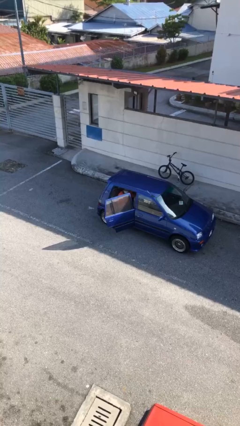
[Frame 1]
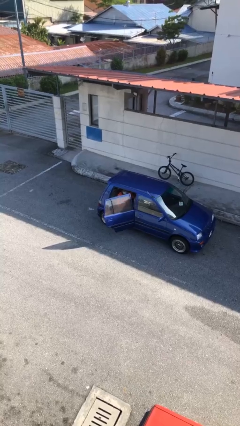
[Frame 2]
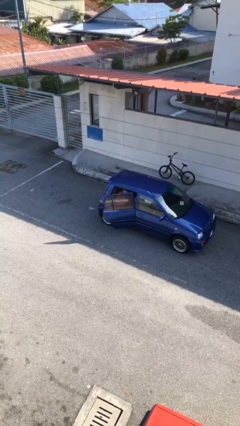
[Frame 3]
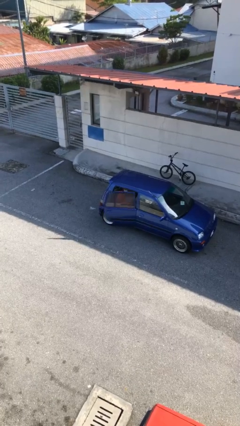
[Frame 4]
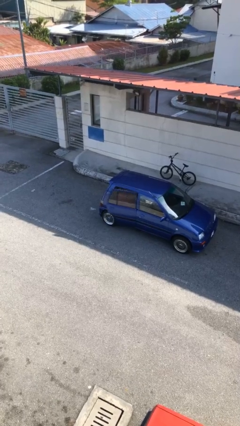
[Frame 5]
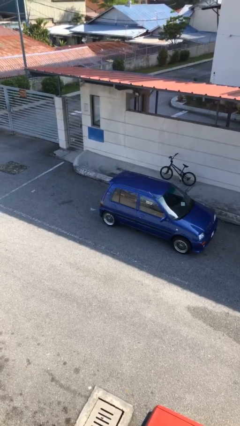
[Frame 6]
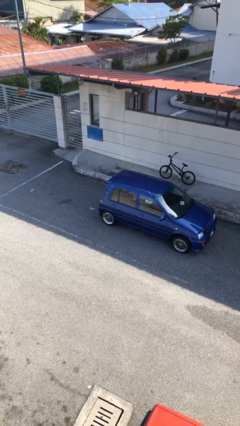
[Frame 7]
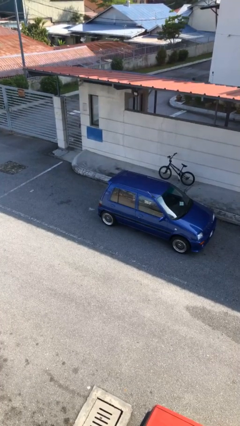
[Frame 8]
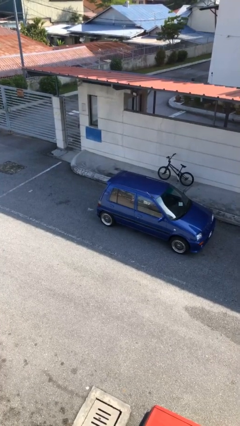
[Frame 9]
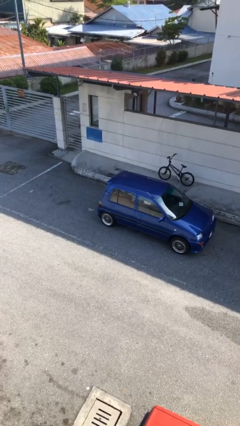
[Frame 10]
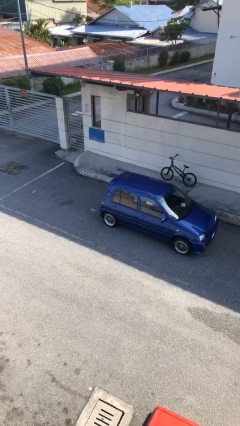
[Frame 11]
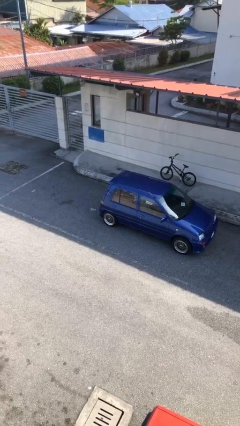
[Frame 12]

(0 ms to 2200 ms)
person closes car door

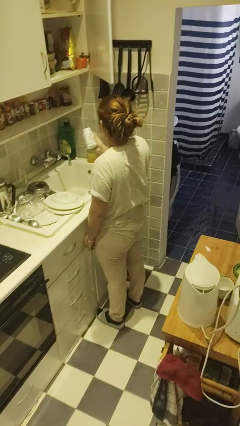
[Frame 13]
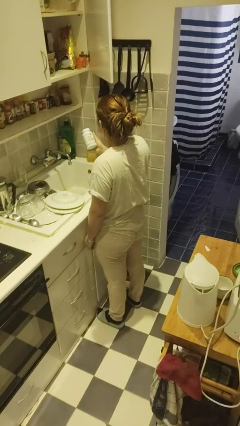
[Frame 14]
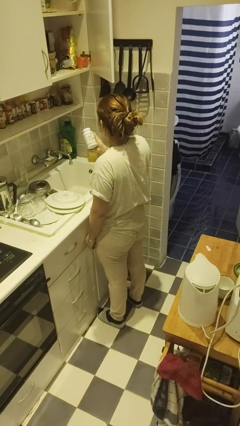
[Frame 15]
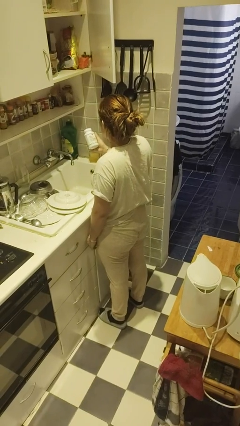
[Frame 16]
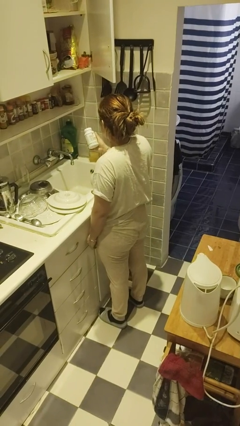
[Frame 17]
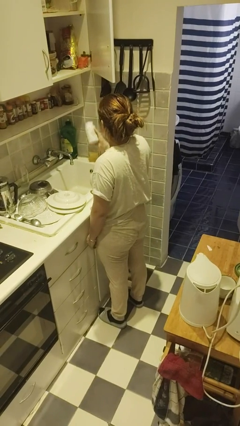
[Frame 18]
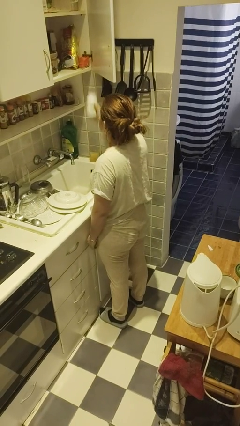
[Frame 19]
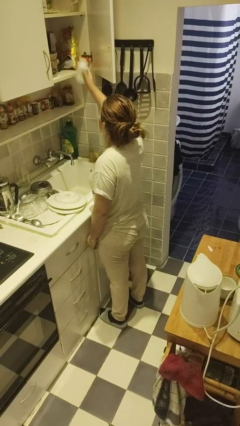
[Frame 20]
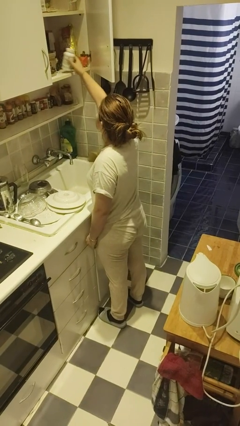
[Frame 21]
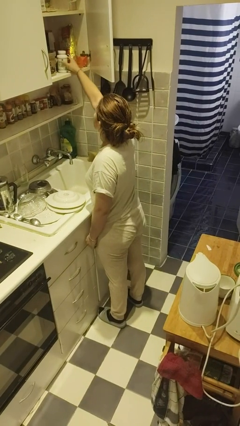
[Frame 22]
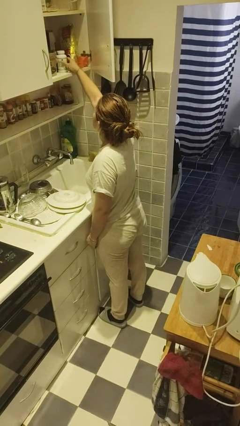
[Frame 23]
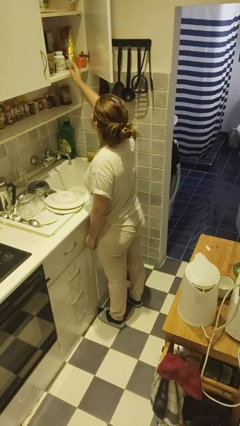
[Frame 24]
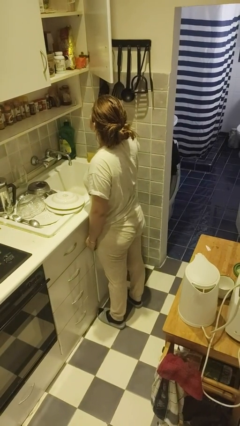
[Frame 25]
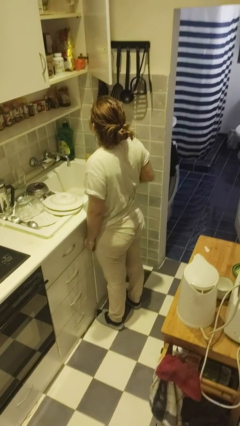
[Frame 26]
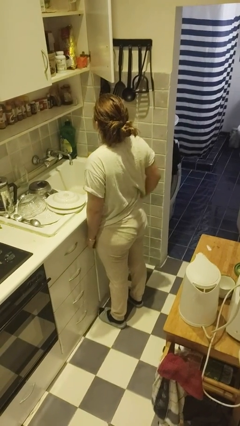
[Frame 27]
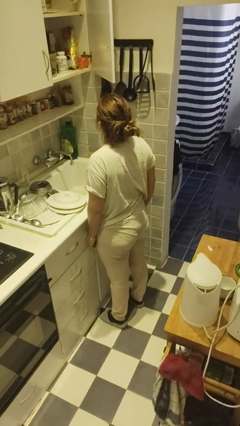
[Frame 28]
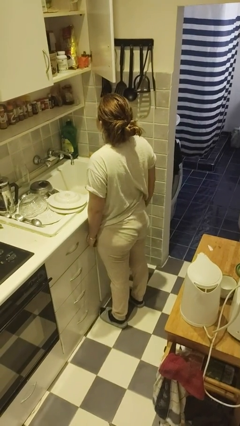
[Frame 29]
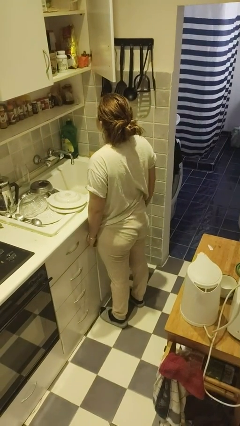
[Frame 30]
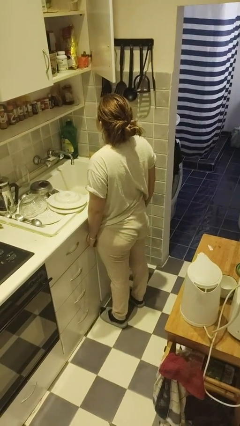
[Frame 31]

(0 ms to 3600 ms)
person puts down object into cabinet

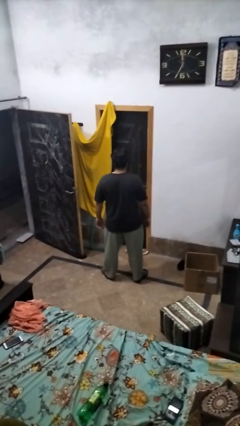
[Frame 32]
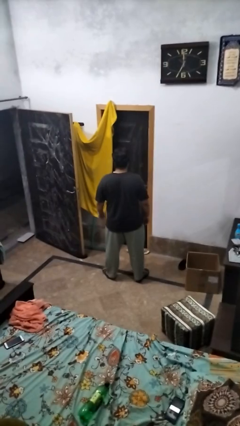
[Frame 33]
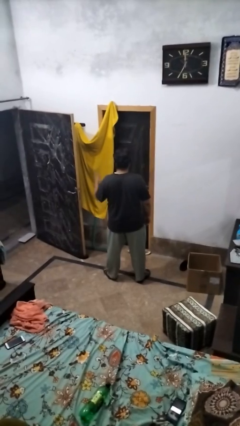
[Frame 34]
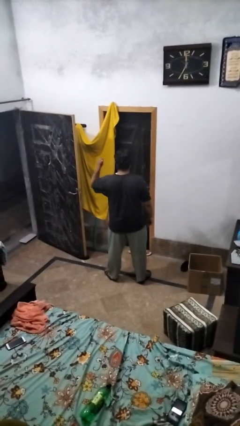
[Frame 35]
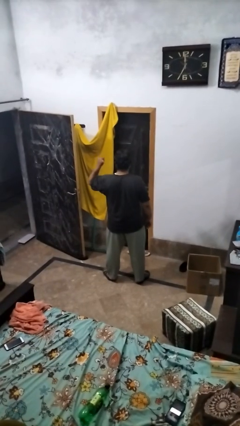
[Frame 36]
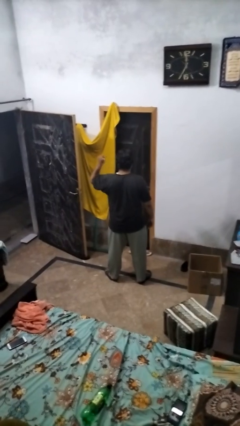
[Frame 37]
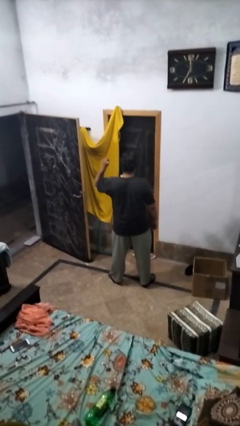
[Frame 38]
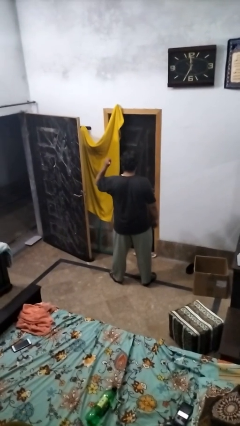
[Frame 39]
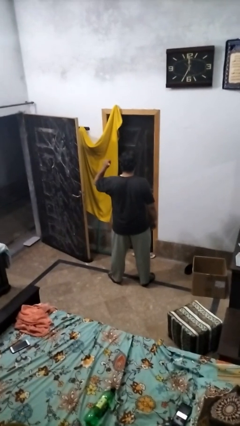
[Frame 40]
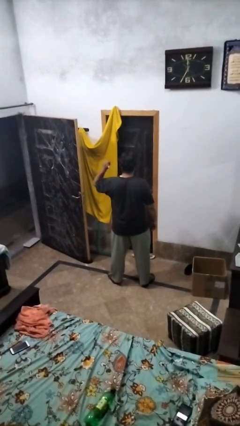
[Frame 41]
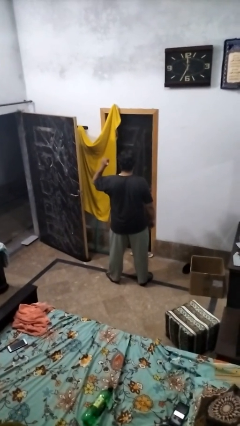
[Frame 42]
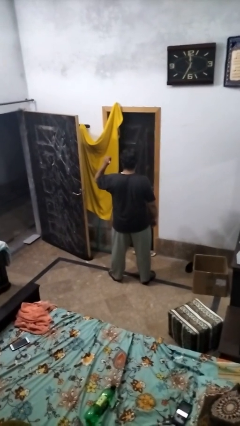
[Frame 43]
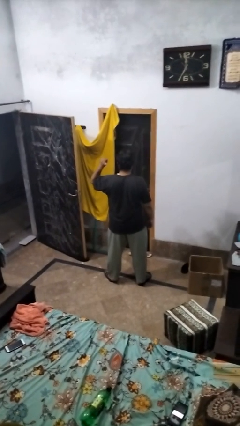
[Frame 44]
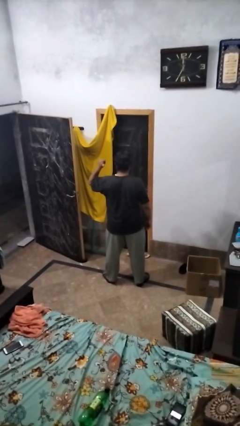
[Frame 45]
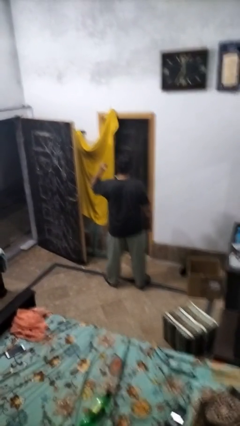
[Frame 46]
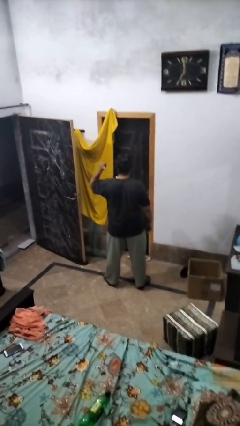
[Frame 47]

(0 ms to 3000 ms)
person gestures behind me

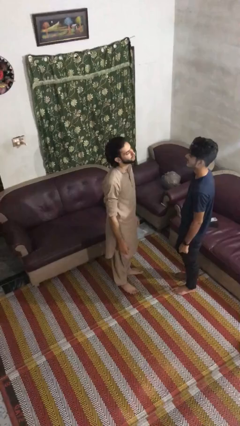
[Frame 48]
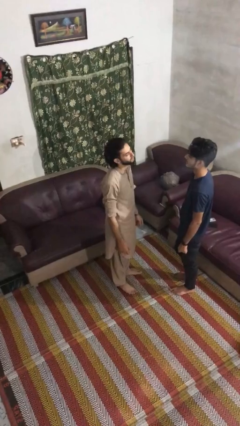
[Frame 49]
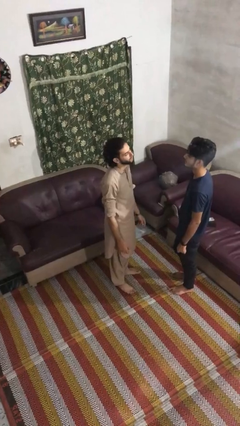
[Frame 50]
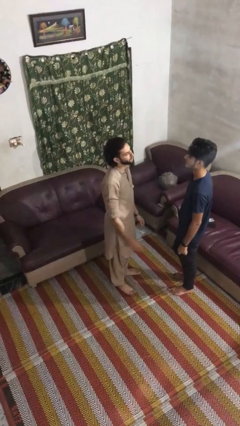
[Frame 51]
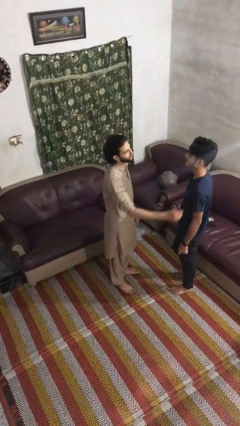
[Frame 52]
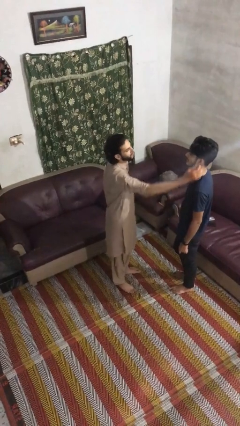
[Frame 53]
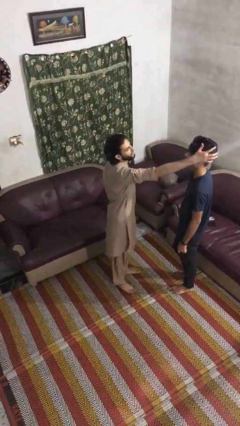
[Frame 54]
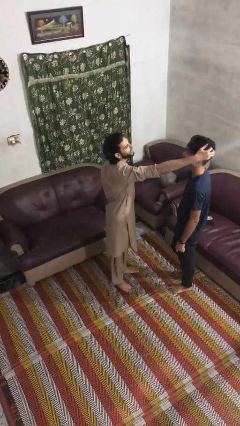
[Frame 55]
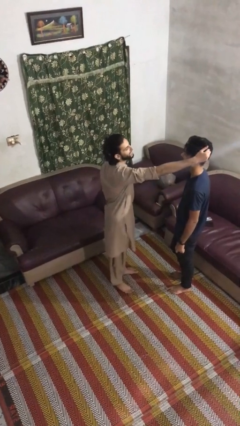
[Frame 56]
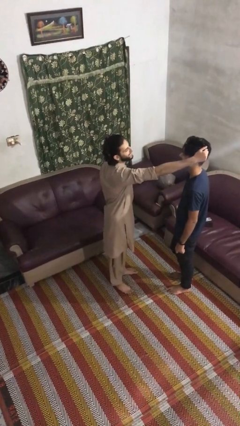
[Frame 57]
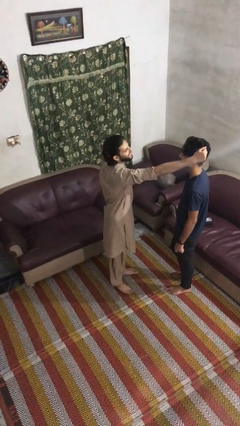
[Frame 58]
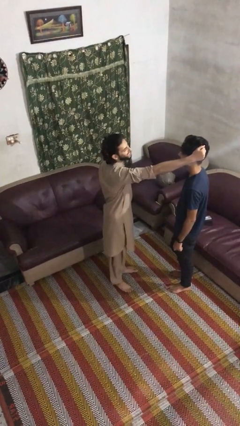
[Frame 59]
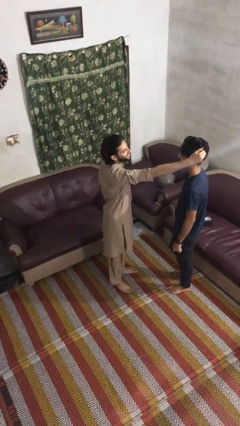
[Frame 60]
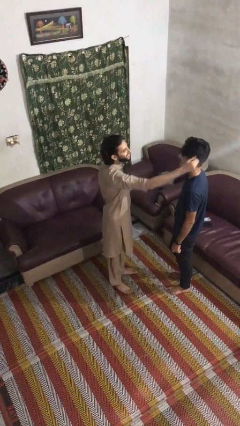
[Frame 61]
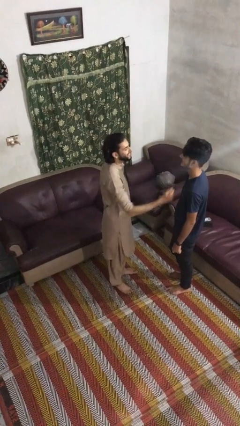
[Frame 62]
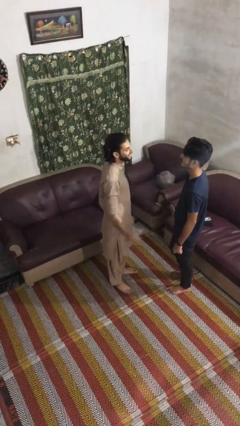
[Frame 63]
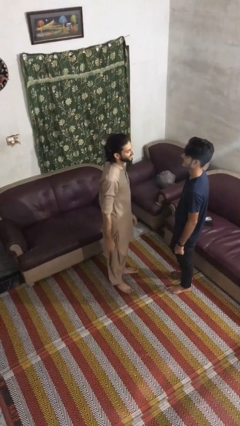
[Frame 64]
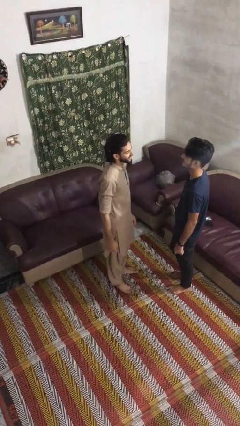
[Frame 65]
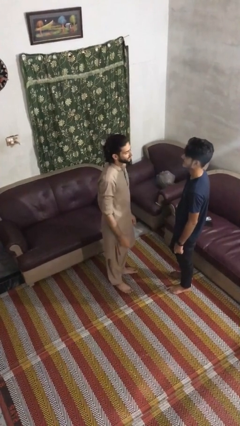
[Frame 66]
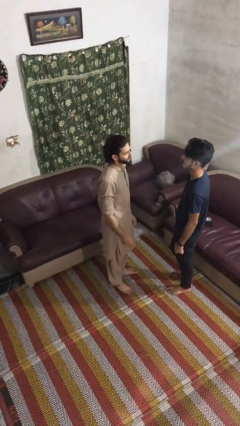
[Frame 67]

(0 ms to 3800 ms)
person grabs person by hair

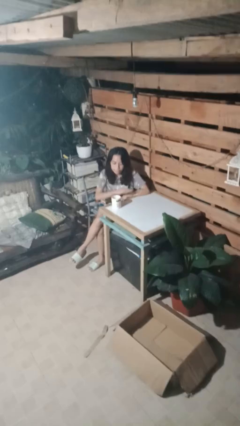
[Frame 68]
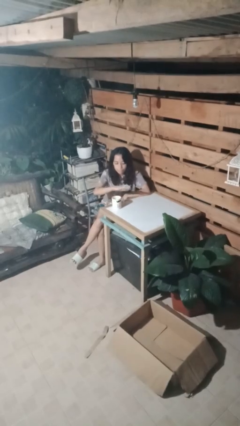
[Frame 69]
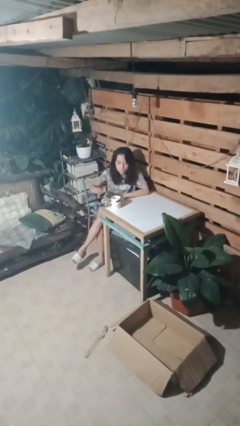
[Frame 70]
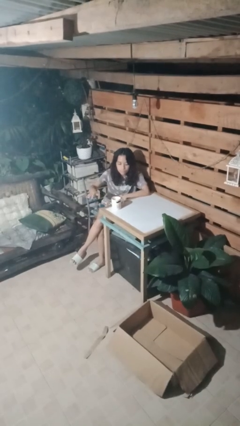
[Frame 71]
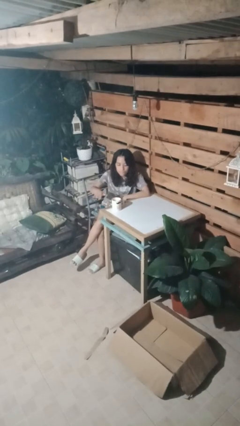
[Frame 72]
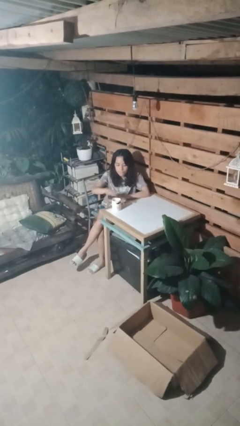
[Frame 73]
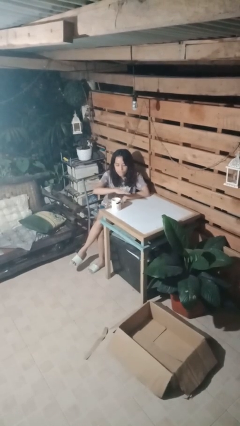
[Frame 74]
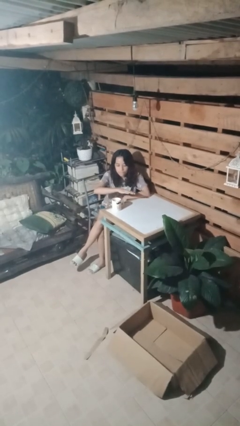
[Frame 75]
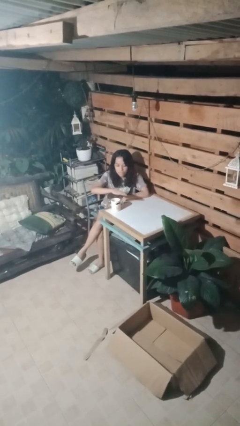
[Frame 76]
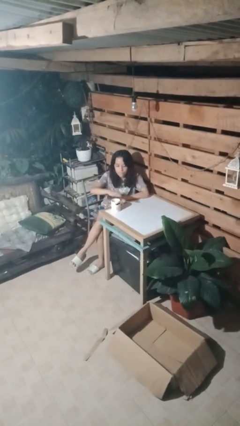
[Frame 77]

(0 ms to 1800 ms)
person waves hand over object

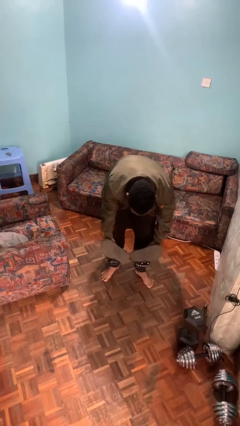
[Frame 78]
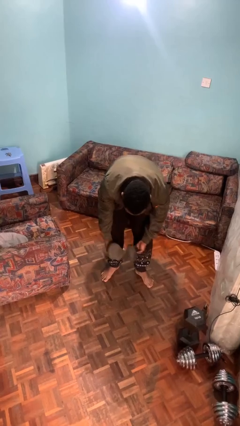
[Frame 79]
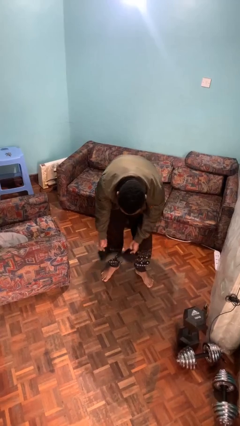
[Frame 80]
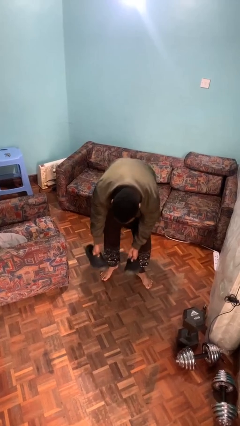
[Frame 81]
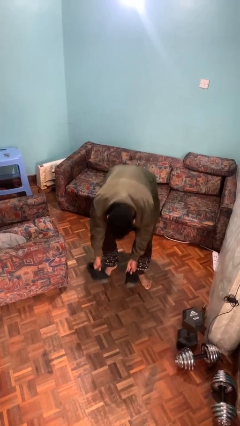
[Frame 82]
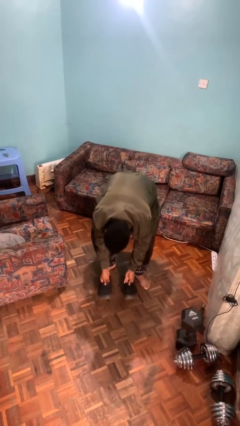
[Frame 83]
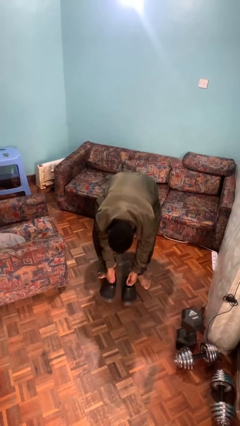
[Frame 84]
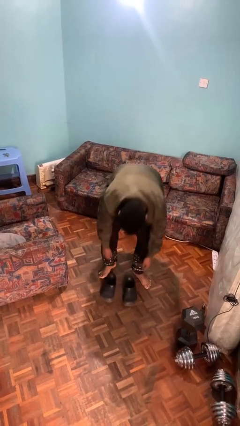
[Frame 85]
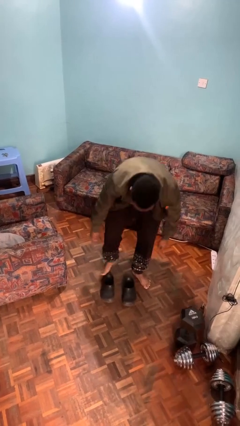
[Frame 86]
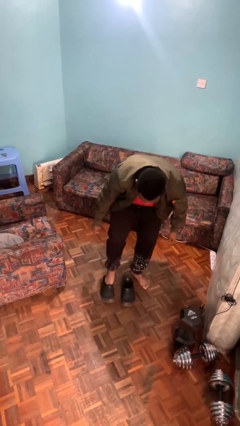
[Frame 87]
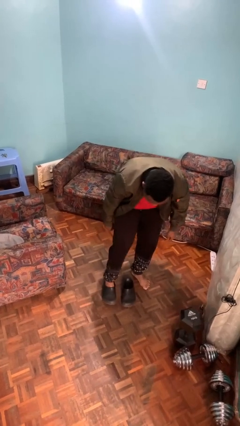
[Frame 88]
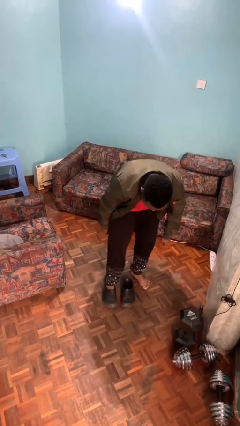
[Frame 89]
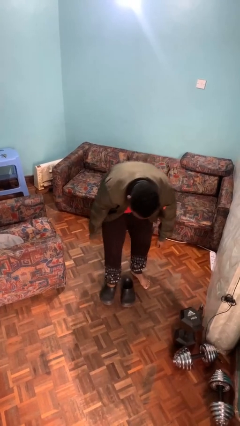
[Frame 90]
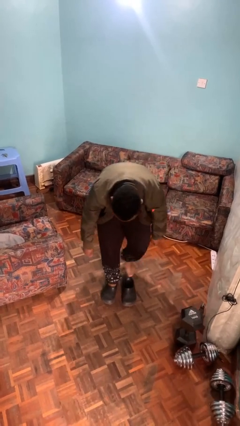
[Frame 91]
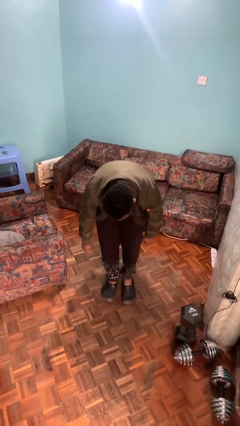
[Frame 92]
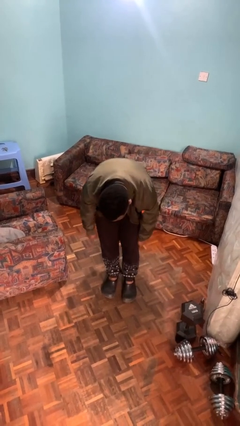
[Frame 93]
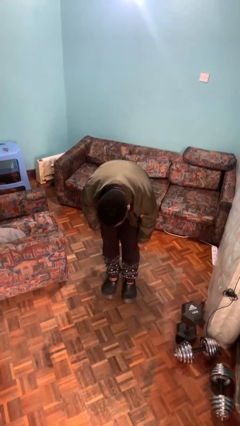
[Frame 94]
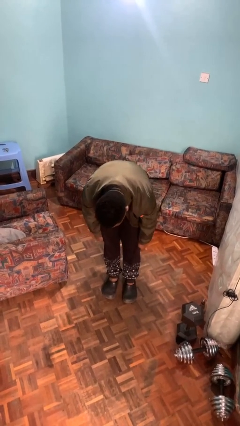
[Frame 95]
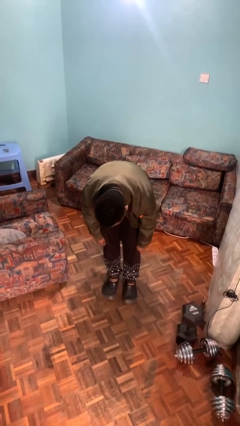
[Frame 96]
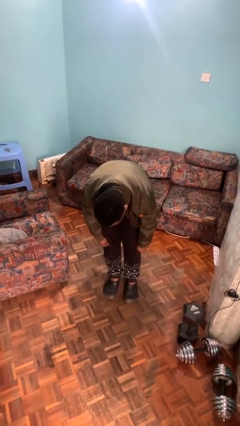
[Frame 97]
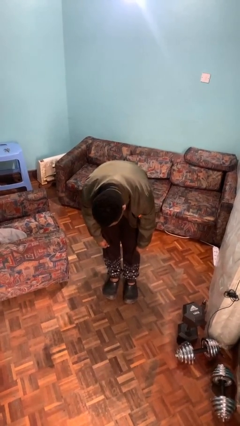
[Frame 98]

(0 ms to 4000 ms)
person puts on shoes
